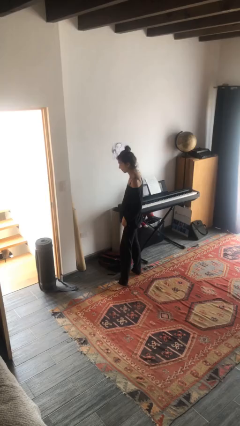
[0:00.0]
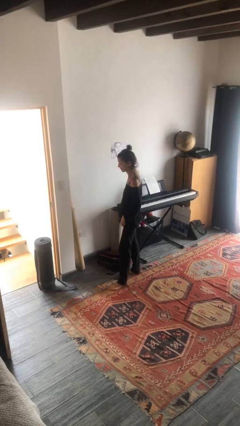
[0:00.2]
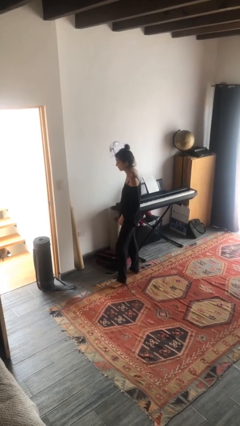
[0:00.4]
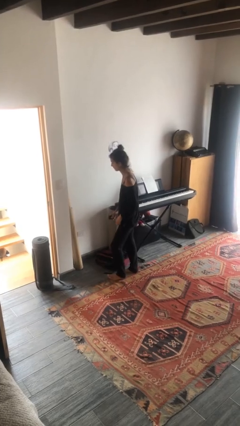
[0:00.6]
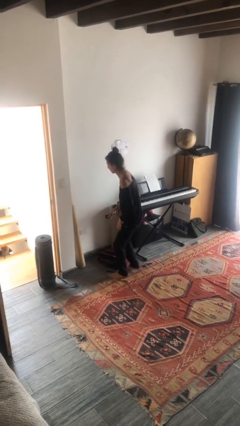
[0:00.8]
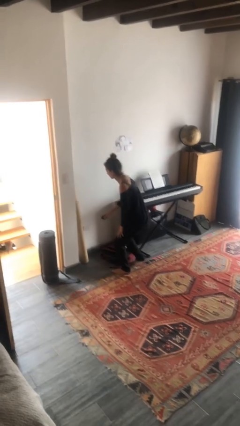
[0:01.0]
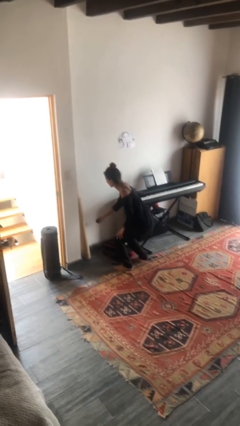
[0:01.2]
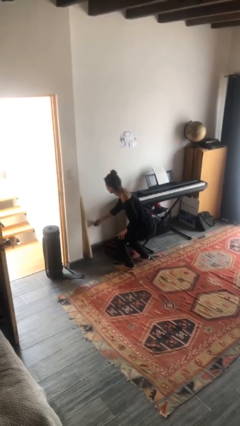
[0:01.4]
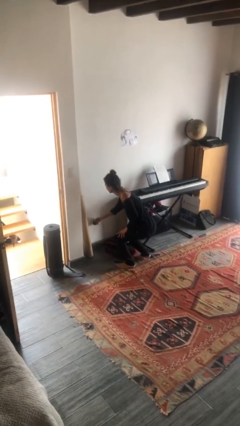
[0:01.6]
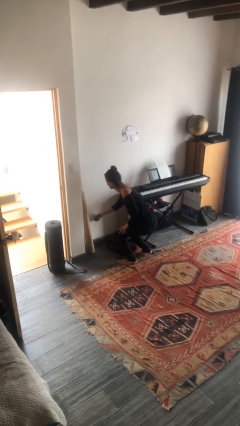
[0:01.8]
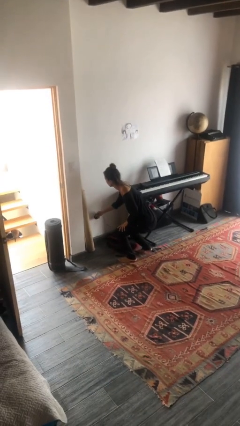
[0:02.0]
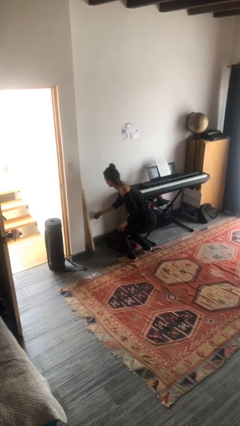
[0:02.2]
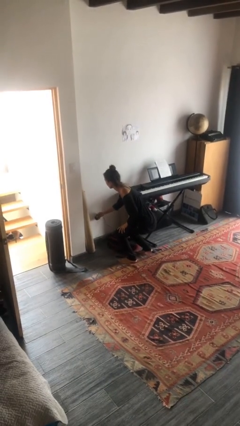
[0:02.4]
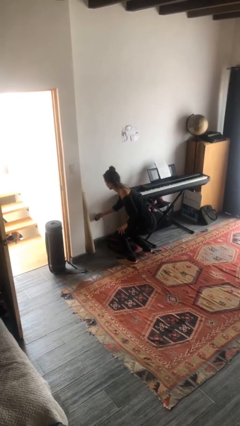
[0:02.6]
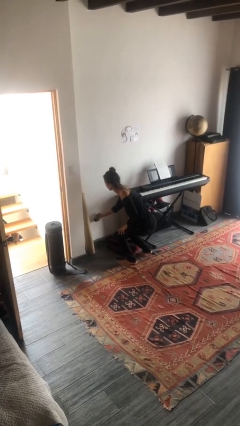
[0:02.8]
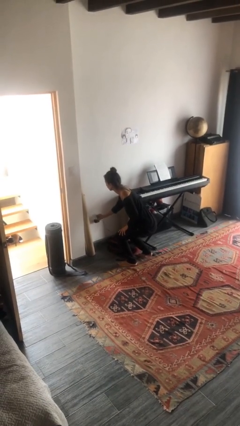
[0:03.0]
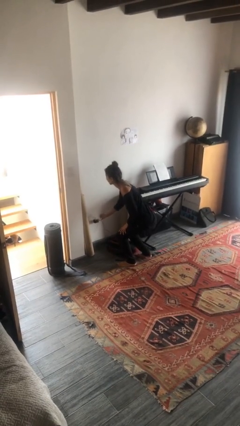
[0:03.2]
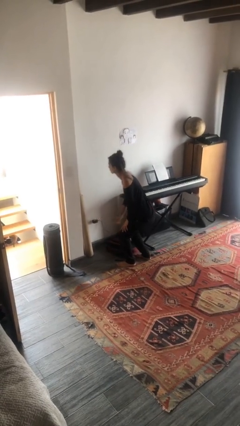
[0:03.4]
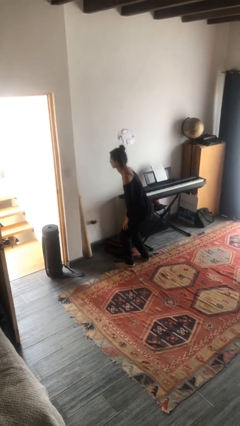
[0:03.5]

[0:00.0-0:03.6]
person plugs into electrical socket

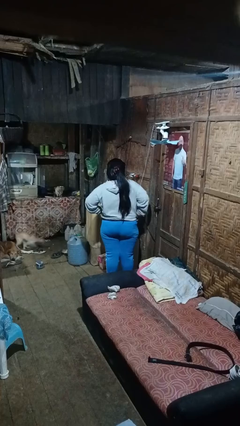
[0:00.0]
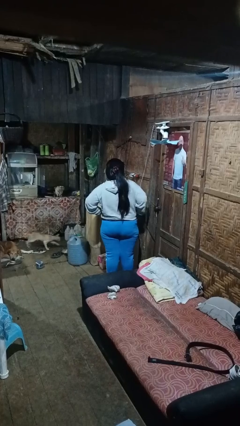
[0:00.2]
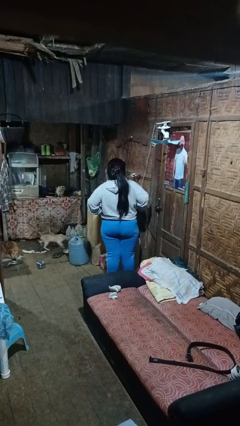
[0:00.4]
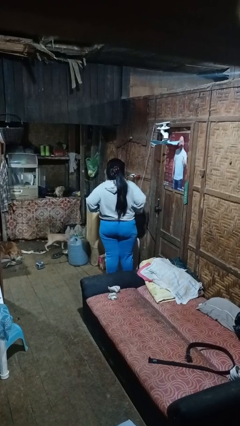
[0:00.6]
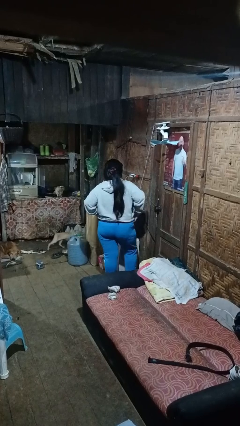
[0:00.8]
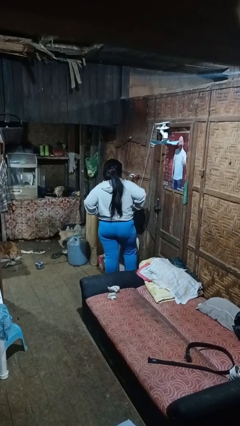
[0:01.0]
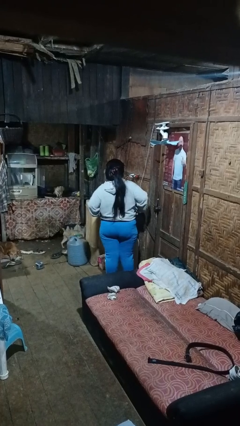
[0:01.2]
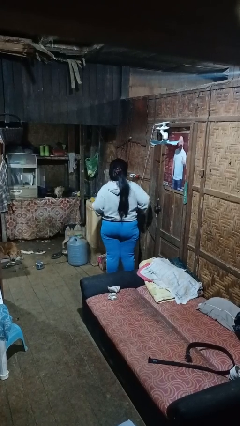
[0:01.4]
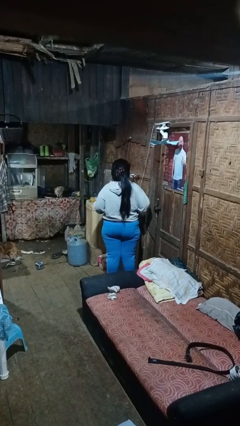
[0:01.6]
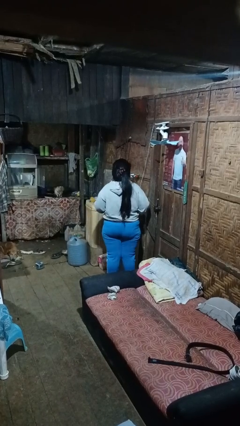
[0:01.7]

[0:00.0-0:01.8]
person hikes up pants

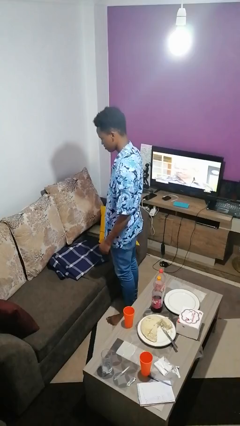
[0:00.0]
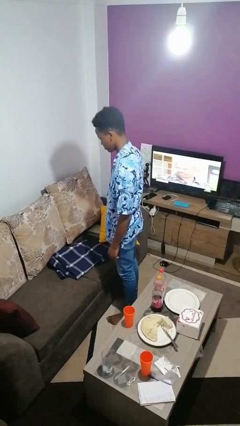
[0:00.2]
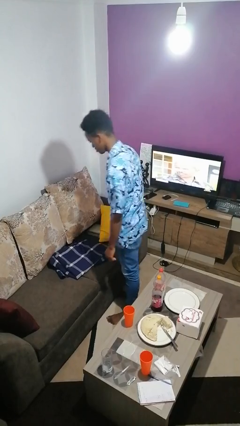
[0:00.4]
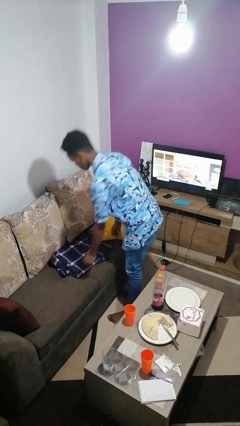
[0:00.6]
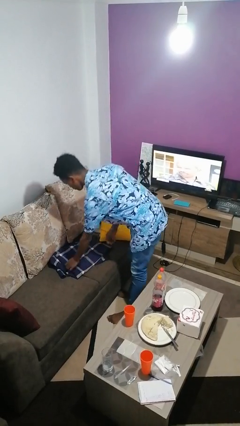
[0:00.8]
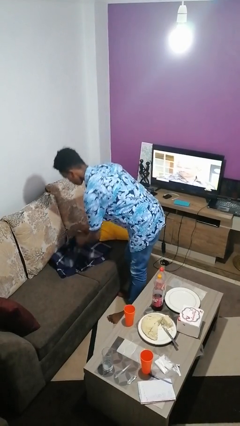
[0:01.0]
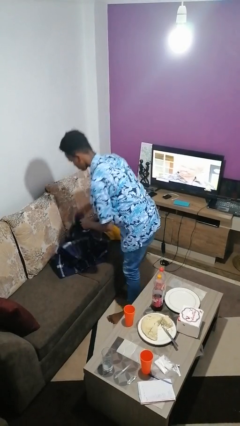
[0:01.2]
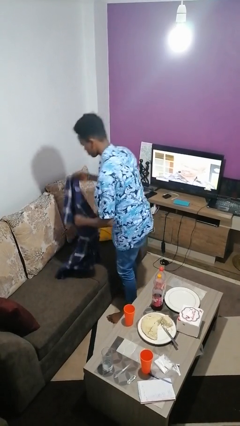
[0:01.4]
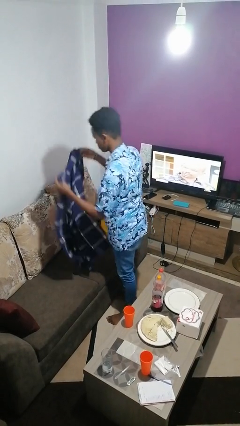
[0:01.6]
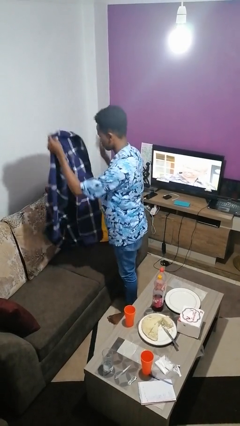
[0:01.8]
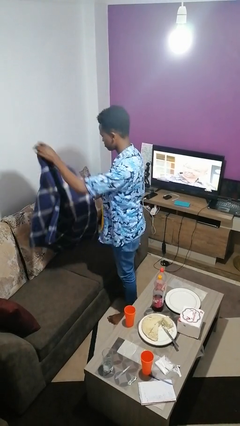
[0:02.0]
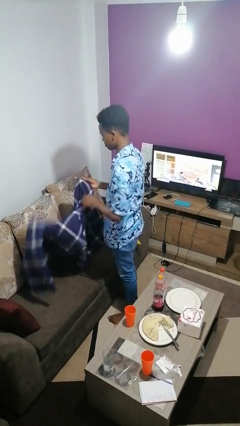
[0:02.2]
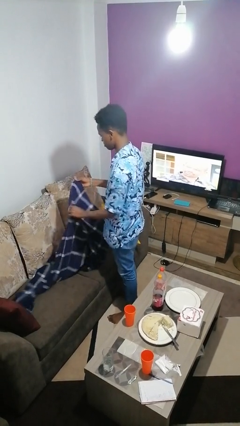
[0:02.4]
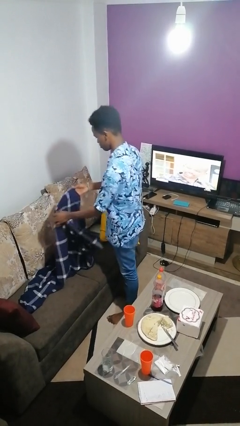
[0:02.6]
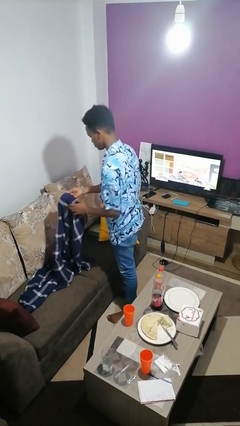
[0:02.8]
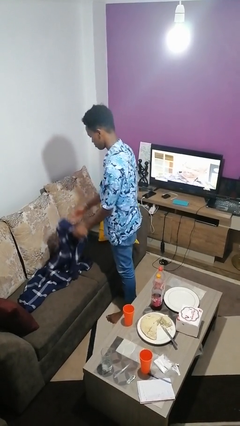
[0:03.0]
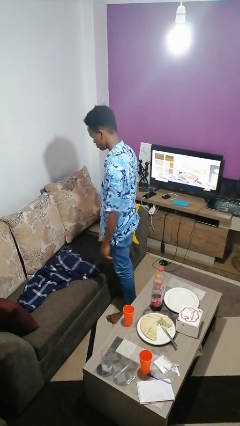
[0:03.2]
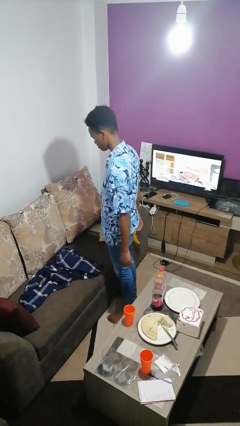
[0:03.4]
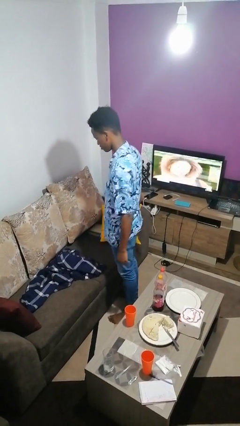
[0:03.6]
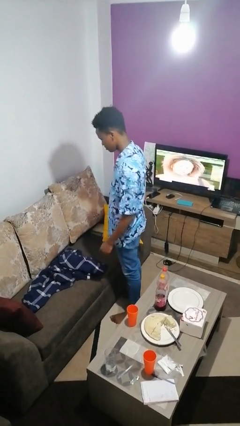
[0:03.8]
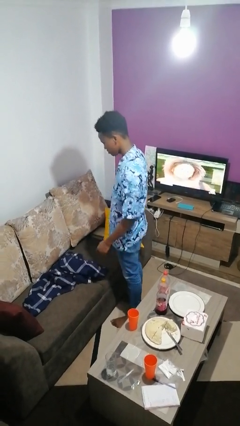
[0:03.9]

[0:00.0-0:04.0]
person unfolds blanket

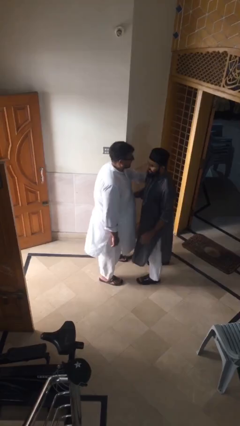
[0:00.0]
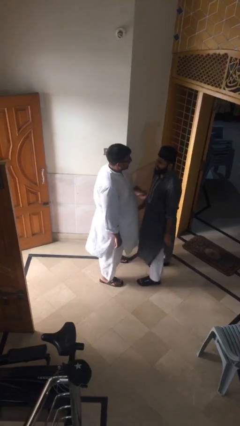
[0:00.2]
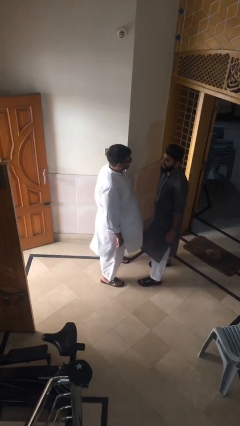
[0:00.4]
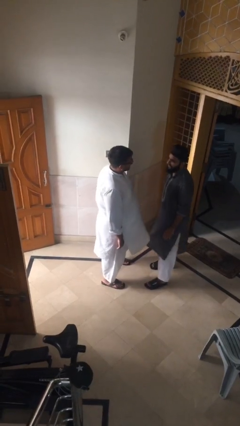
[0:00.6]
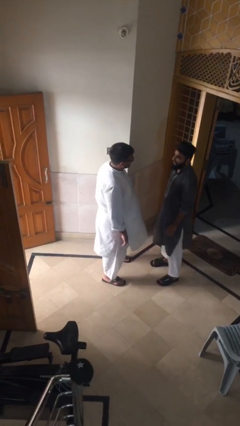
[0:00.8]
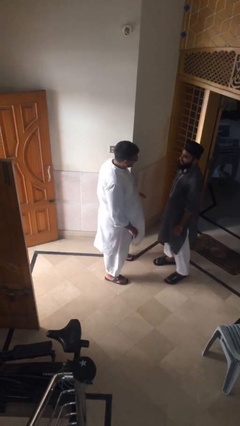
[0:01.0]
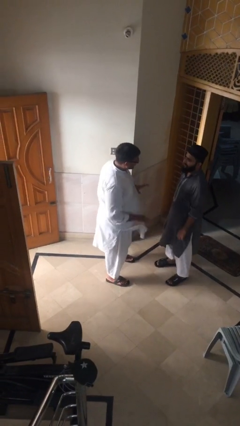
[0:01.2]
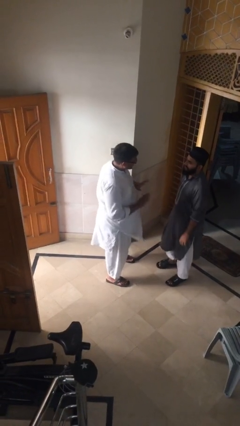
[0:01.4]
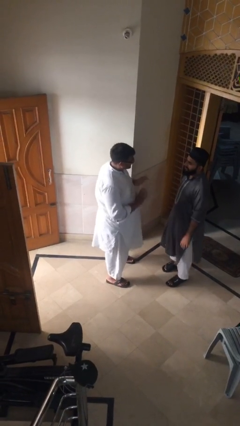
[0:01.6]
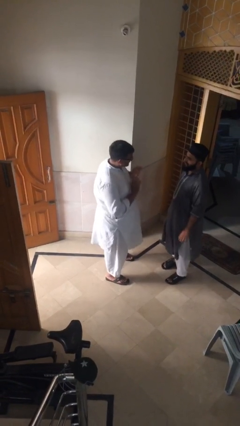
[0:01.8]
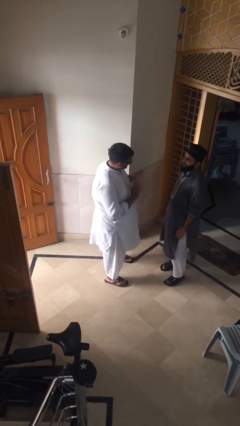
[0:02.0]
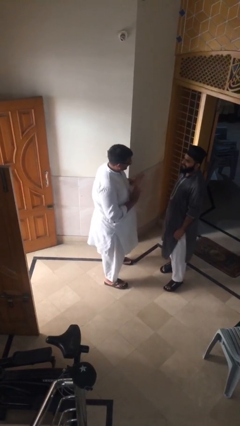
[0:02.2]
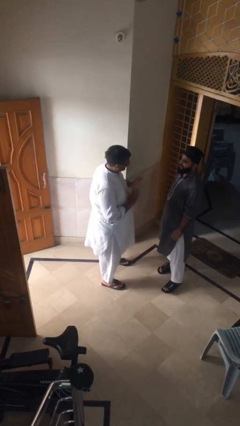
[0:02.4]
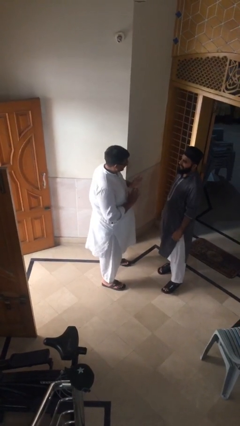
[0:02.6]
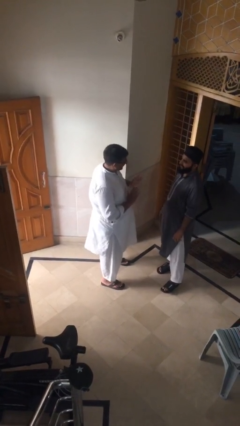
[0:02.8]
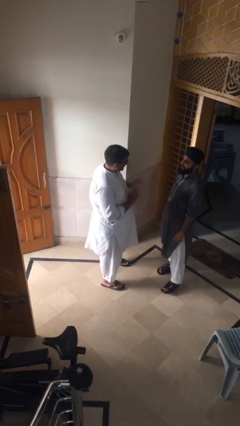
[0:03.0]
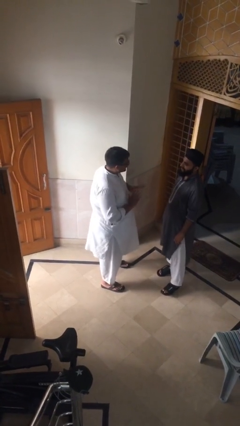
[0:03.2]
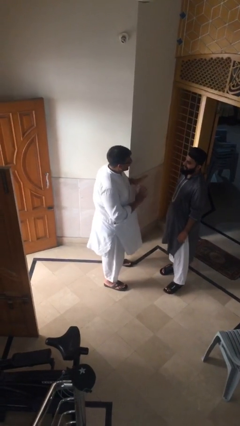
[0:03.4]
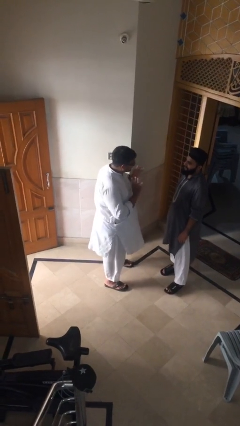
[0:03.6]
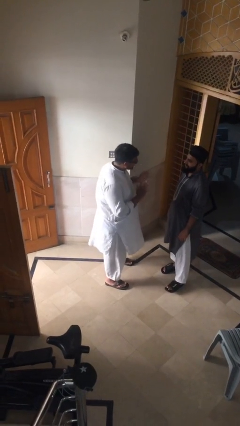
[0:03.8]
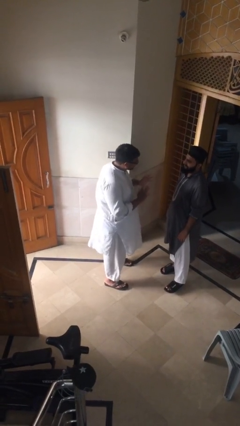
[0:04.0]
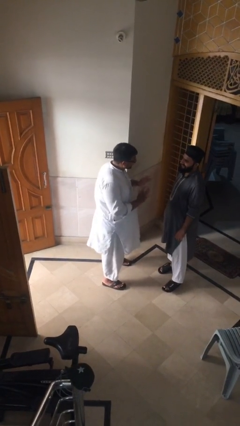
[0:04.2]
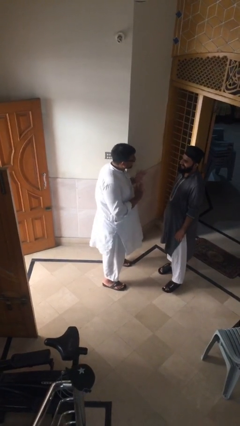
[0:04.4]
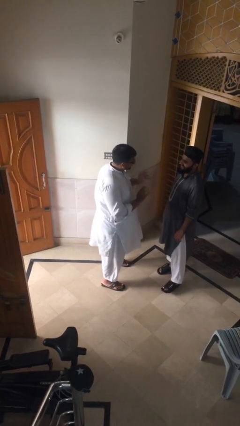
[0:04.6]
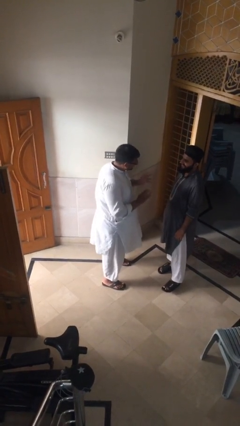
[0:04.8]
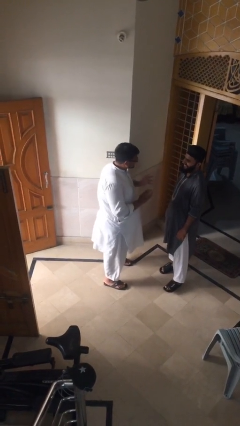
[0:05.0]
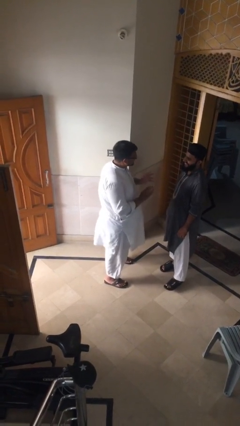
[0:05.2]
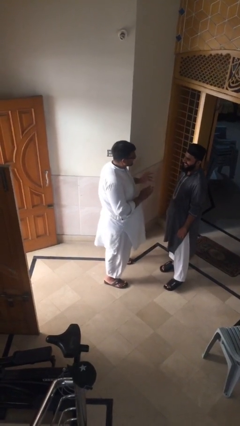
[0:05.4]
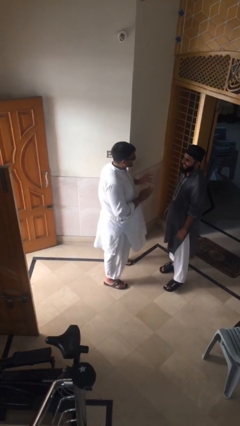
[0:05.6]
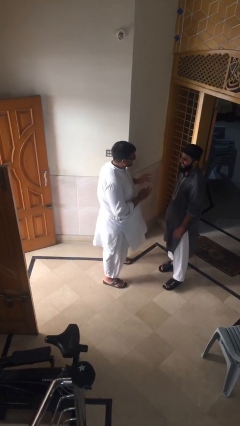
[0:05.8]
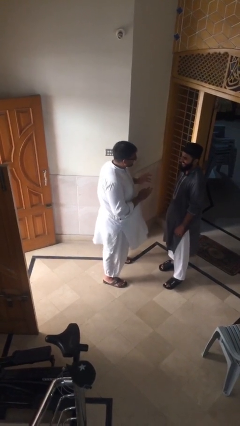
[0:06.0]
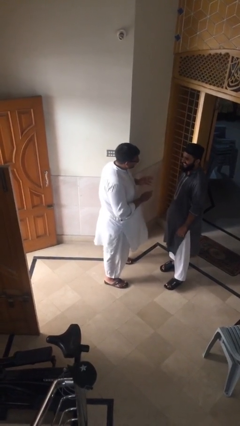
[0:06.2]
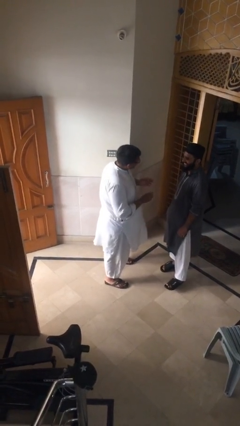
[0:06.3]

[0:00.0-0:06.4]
person talks to person

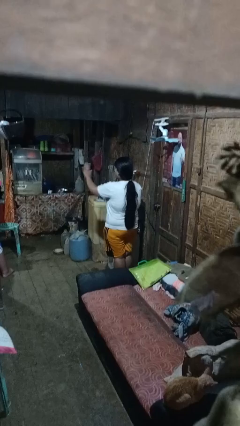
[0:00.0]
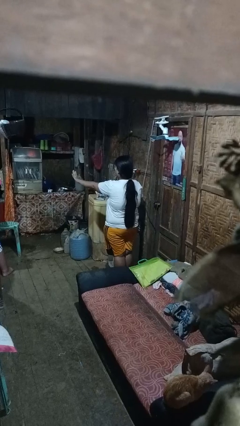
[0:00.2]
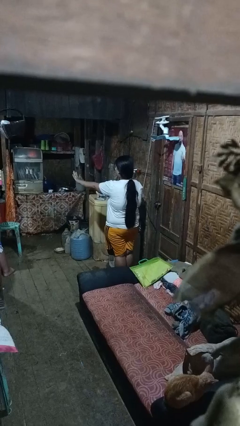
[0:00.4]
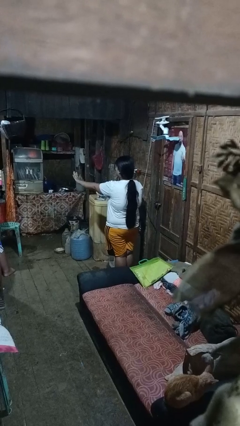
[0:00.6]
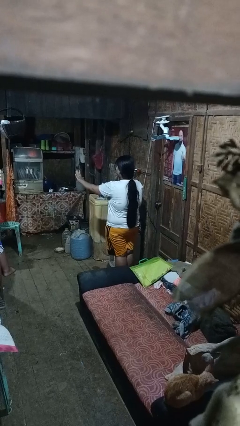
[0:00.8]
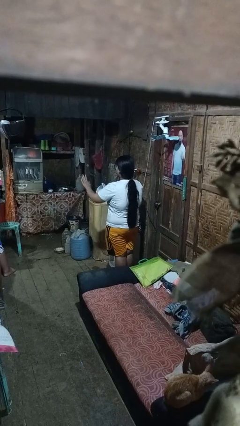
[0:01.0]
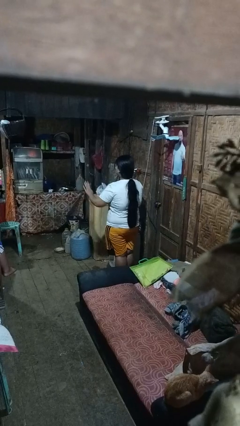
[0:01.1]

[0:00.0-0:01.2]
person gestures stop

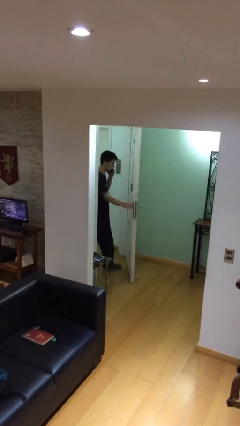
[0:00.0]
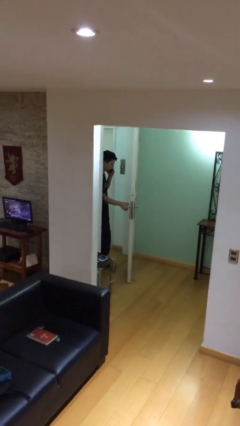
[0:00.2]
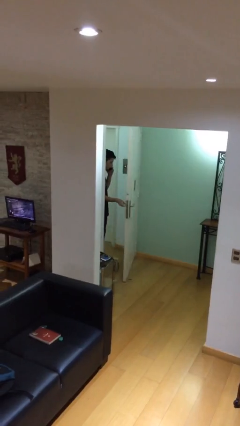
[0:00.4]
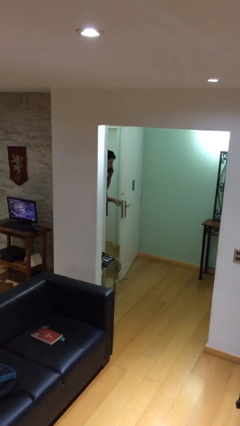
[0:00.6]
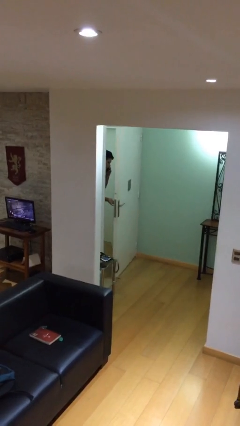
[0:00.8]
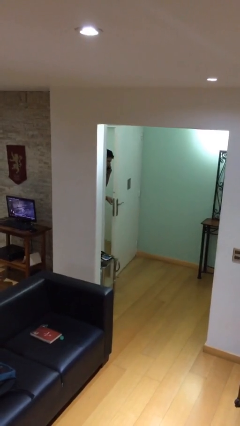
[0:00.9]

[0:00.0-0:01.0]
person closes facility door
